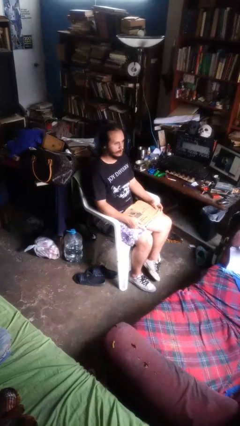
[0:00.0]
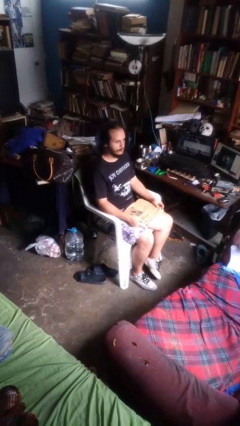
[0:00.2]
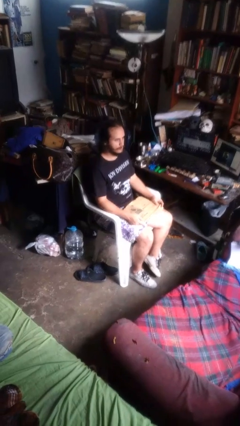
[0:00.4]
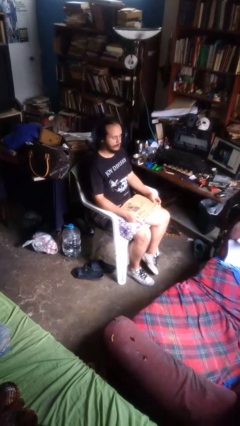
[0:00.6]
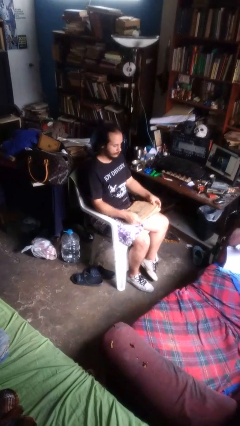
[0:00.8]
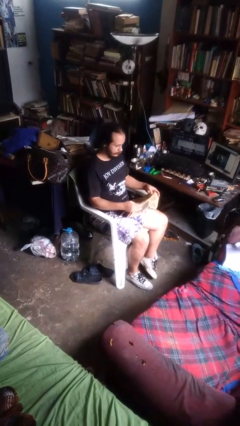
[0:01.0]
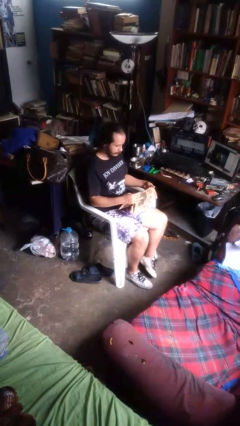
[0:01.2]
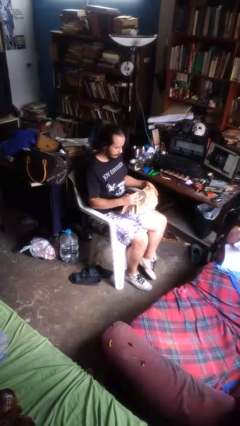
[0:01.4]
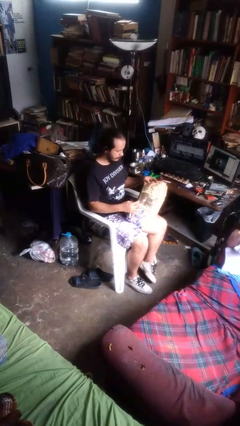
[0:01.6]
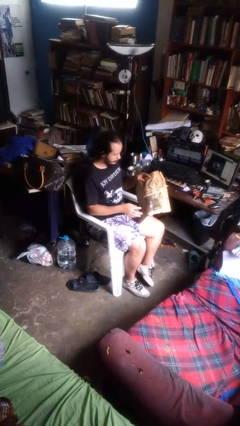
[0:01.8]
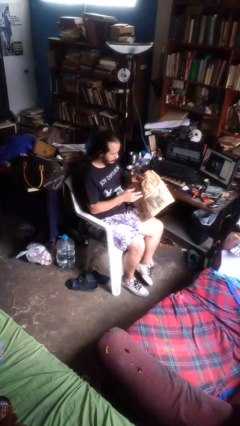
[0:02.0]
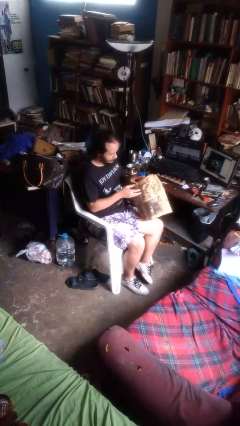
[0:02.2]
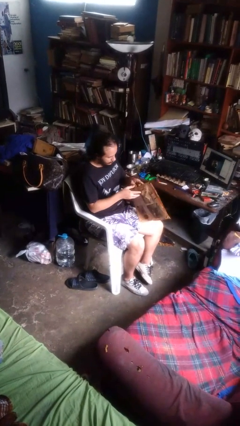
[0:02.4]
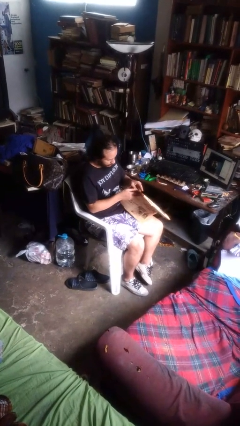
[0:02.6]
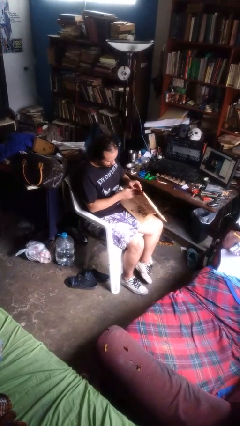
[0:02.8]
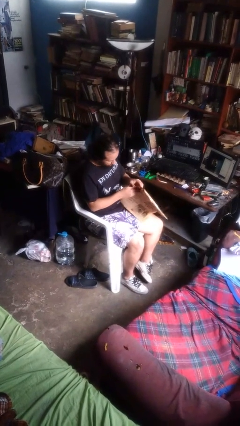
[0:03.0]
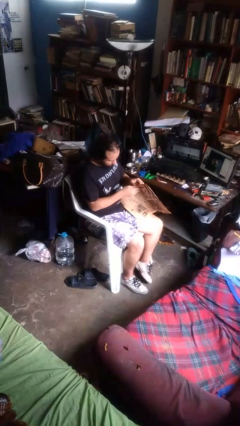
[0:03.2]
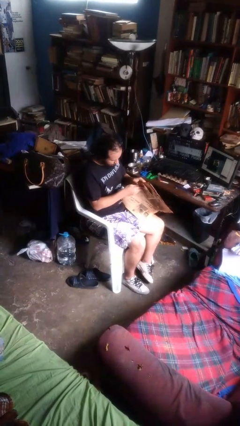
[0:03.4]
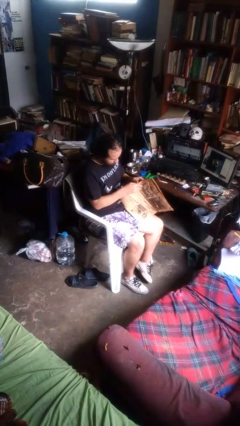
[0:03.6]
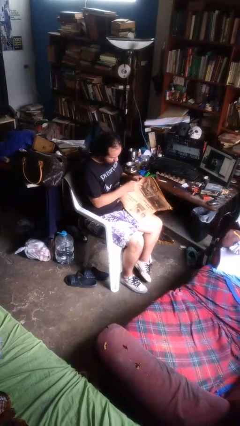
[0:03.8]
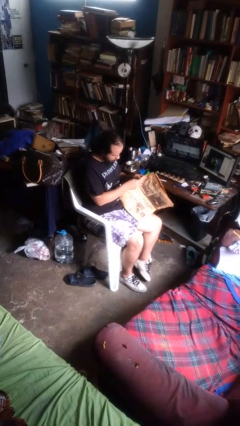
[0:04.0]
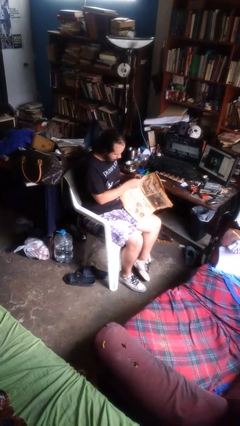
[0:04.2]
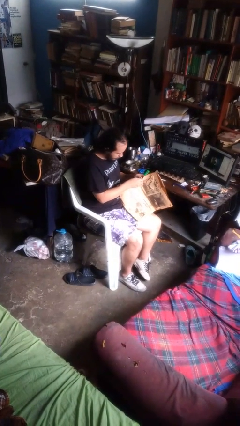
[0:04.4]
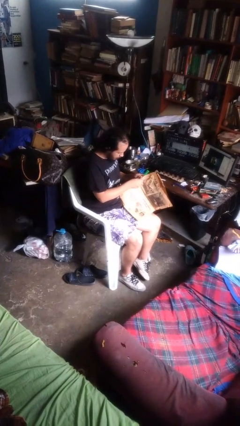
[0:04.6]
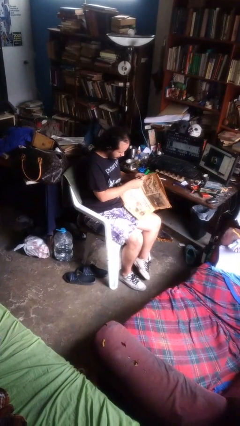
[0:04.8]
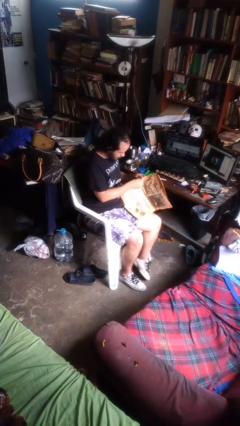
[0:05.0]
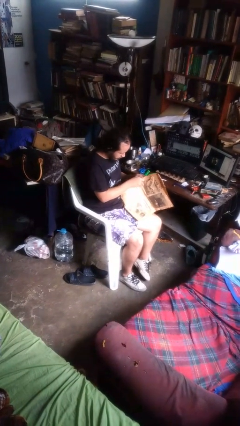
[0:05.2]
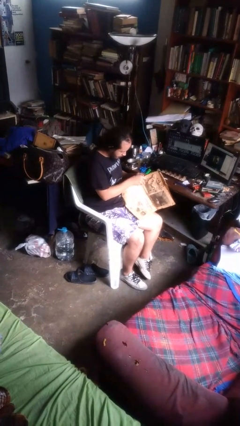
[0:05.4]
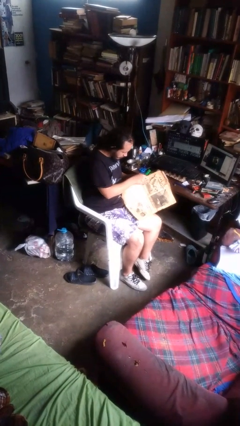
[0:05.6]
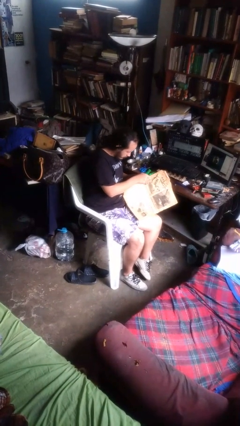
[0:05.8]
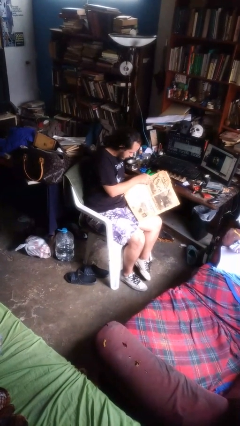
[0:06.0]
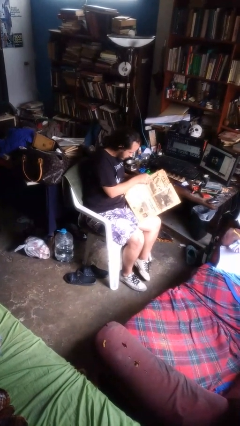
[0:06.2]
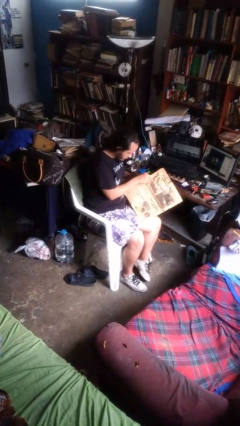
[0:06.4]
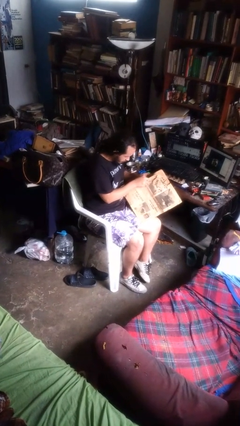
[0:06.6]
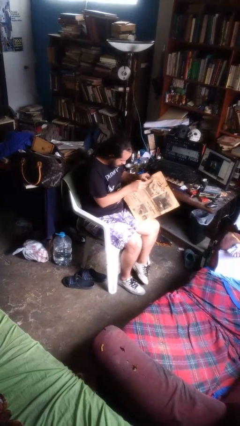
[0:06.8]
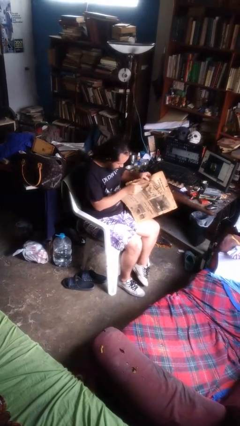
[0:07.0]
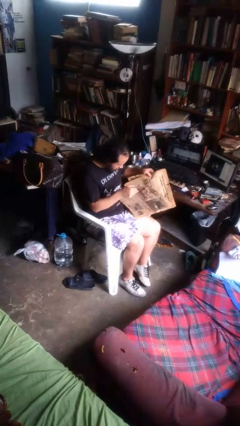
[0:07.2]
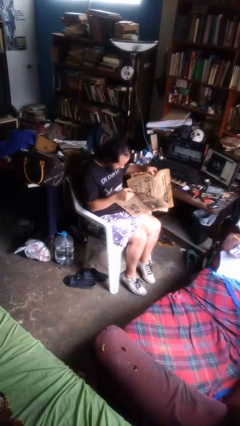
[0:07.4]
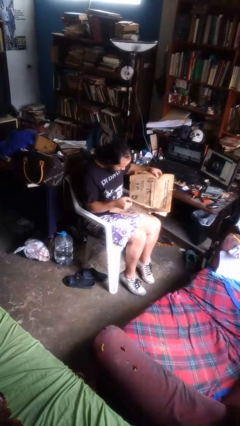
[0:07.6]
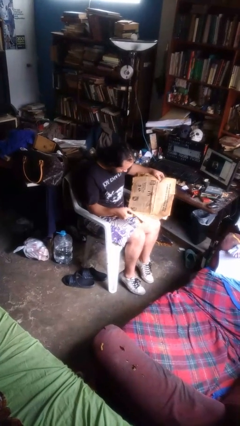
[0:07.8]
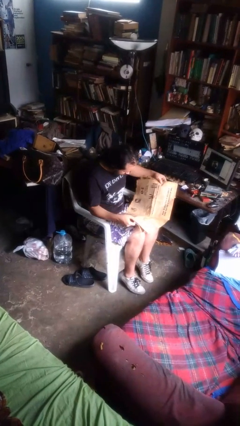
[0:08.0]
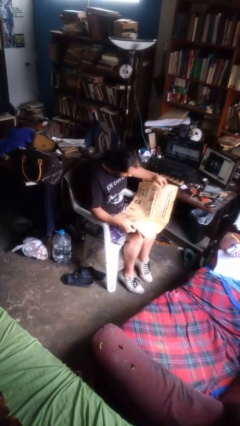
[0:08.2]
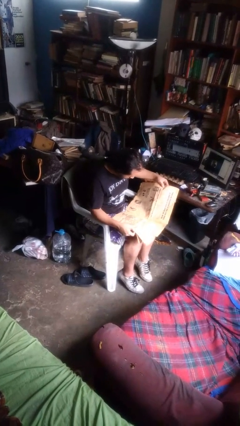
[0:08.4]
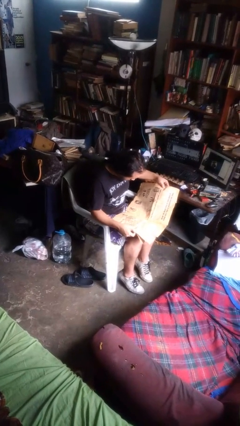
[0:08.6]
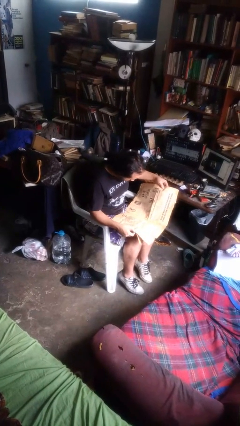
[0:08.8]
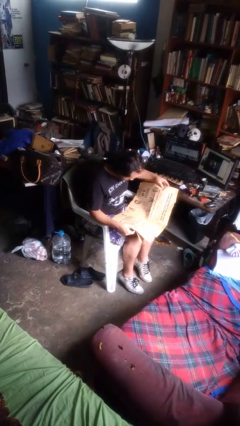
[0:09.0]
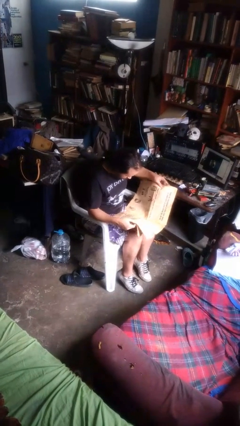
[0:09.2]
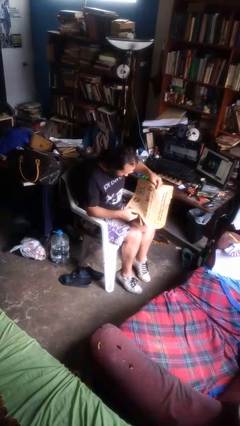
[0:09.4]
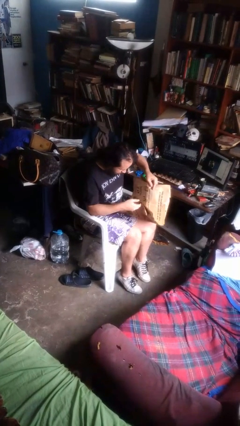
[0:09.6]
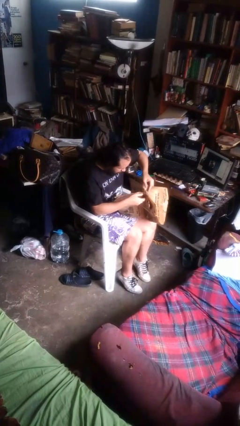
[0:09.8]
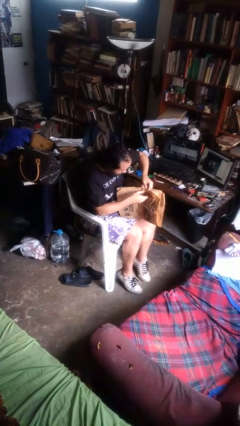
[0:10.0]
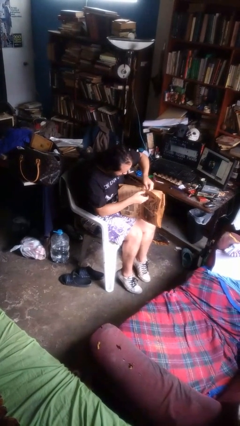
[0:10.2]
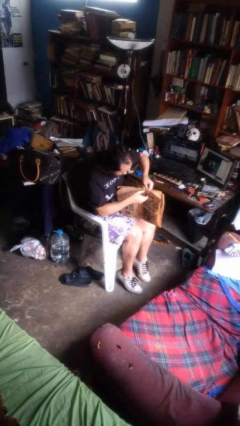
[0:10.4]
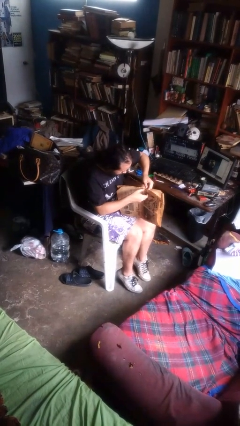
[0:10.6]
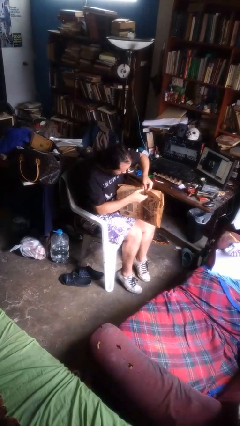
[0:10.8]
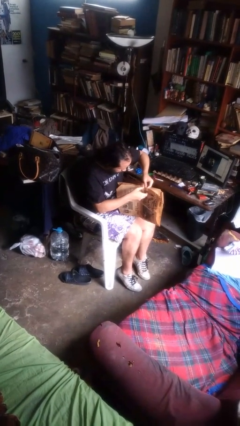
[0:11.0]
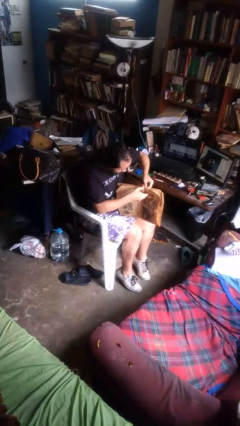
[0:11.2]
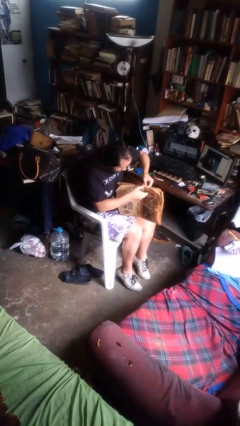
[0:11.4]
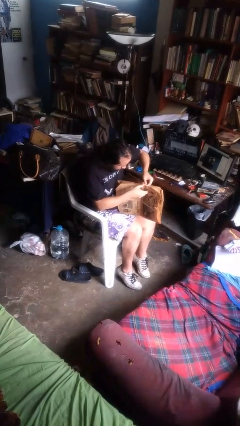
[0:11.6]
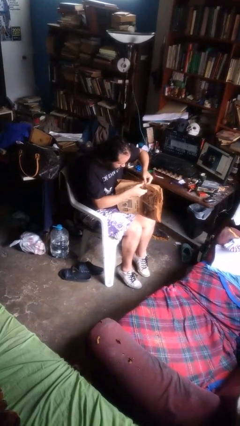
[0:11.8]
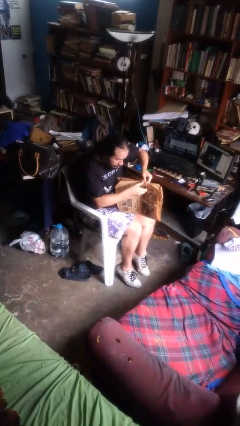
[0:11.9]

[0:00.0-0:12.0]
person reads newspaper

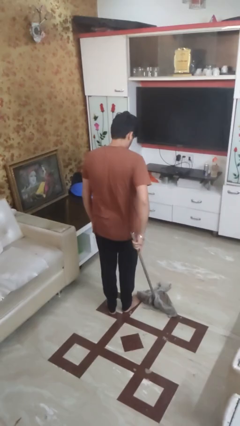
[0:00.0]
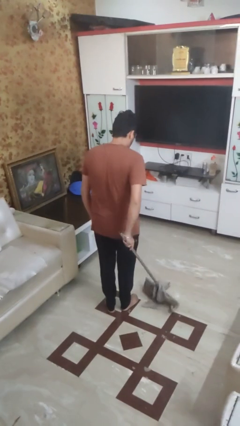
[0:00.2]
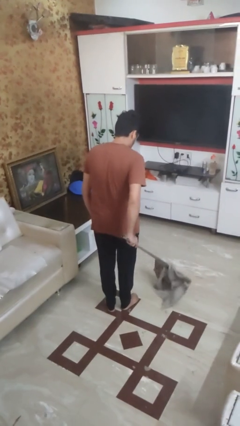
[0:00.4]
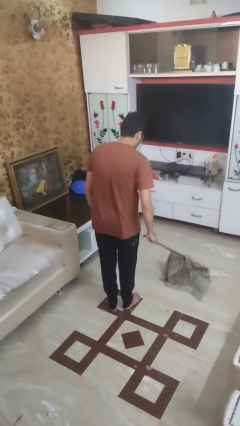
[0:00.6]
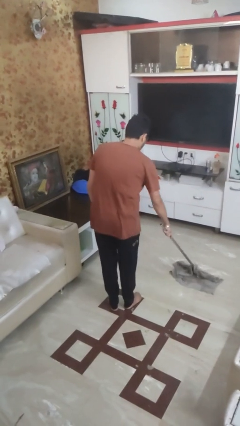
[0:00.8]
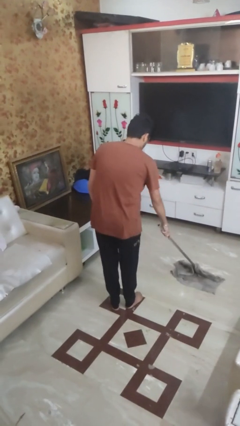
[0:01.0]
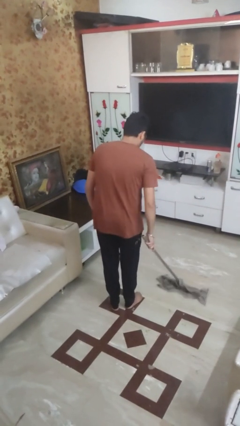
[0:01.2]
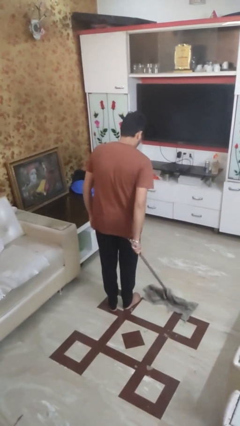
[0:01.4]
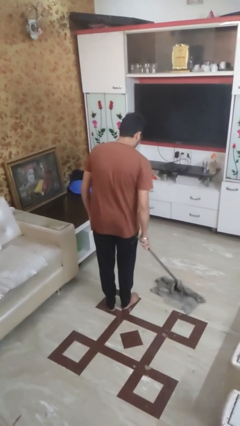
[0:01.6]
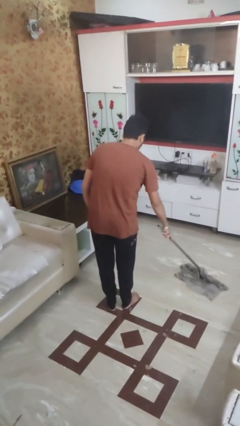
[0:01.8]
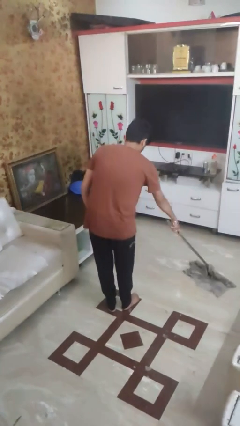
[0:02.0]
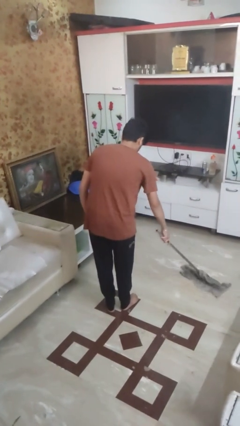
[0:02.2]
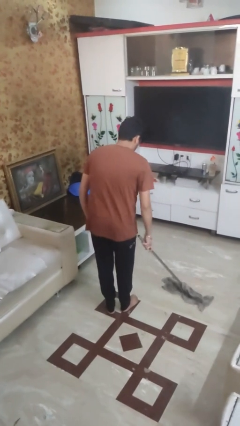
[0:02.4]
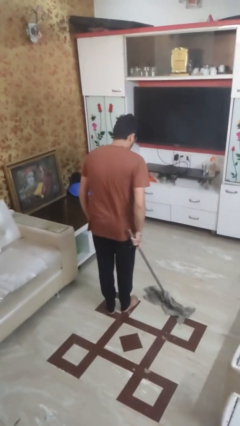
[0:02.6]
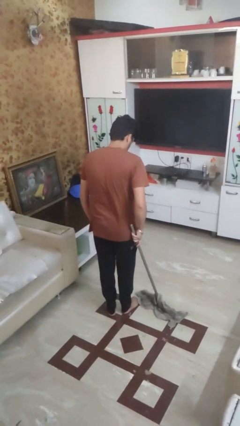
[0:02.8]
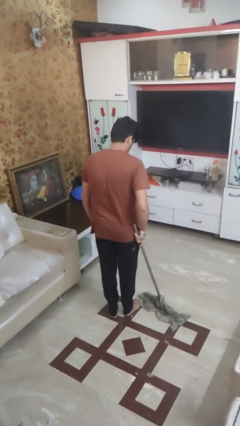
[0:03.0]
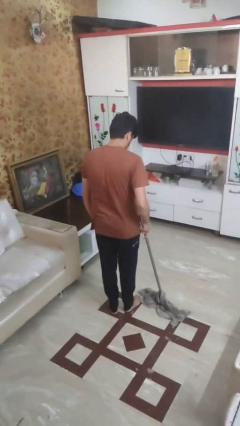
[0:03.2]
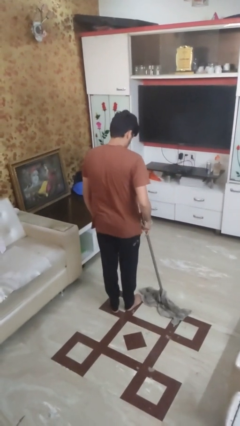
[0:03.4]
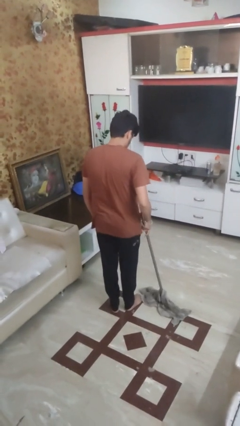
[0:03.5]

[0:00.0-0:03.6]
person mops

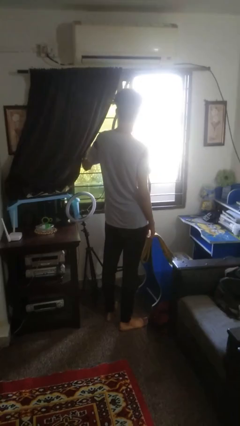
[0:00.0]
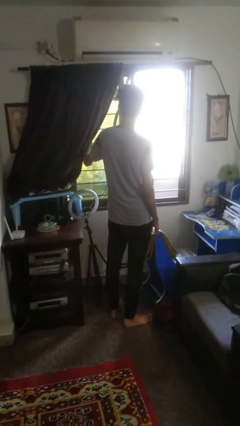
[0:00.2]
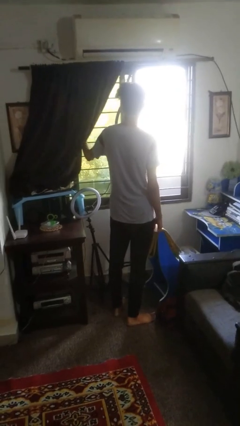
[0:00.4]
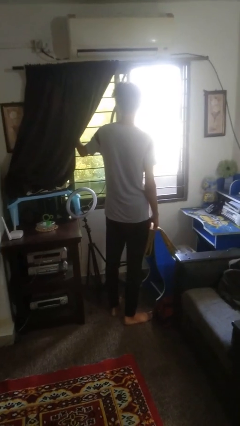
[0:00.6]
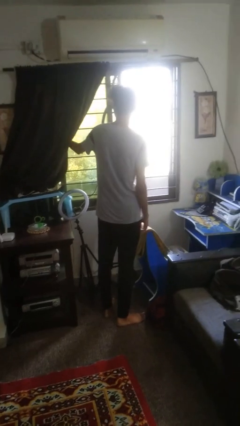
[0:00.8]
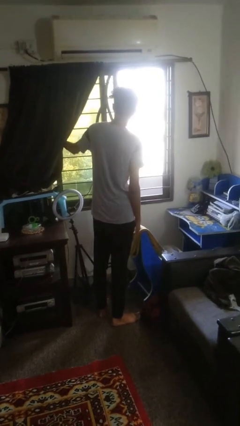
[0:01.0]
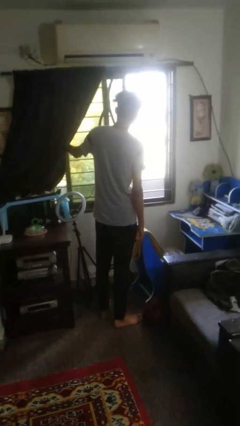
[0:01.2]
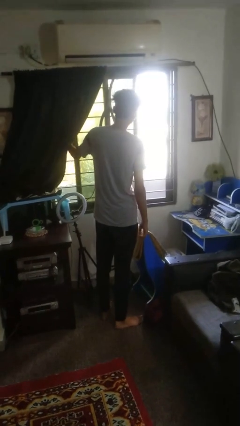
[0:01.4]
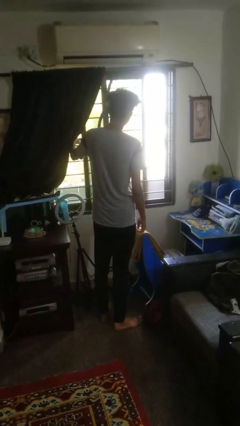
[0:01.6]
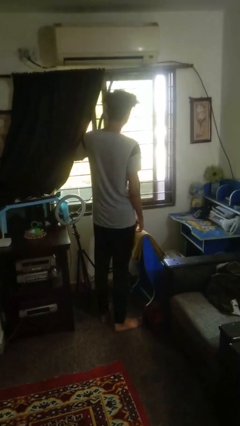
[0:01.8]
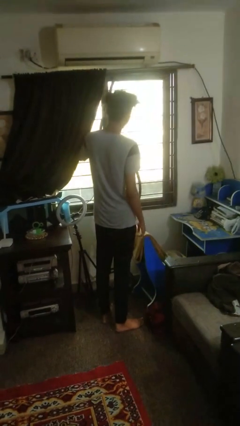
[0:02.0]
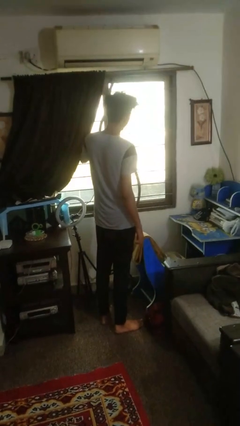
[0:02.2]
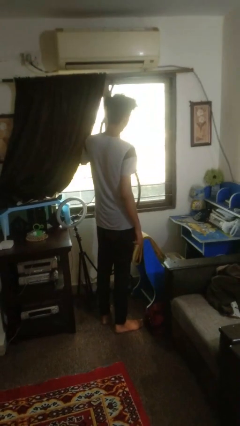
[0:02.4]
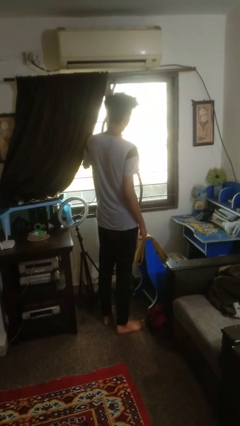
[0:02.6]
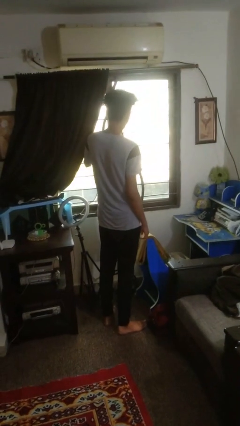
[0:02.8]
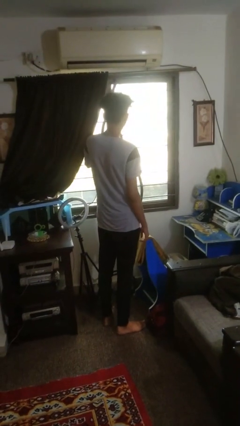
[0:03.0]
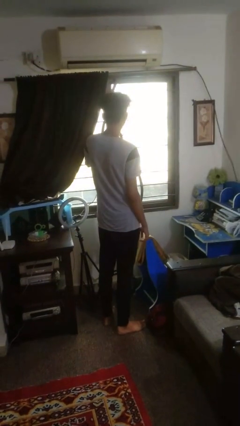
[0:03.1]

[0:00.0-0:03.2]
person closes home window
